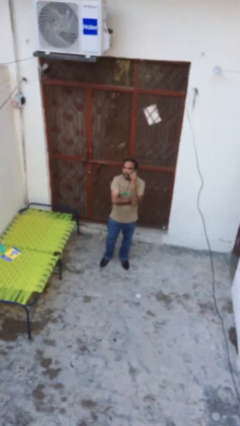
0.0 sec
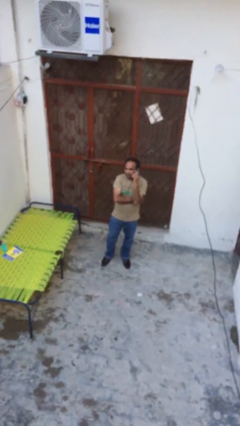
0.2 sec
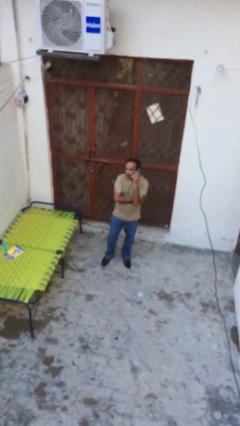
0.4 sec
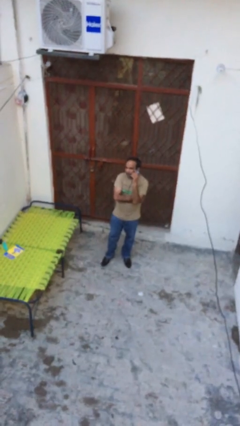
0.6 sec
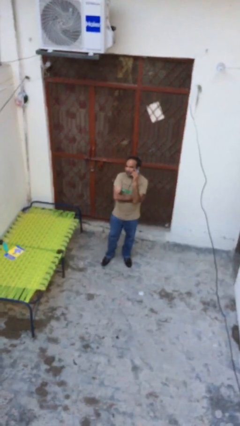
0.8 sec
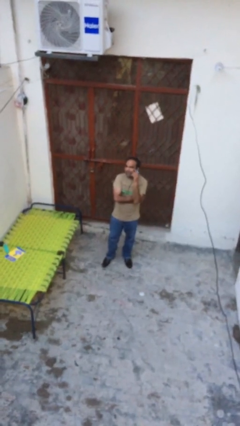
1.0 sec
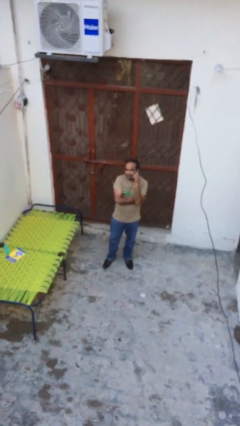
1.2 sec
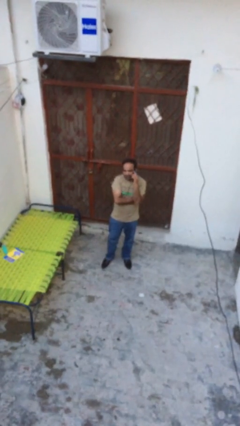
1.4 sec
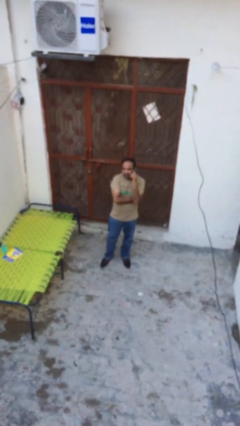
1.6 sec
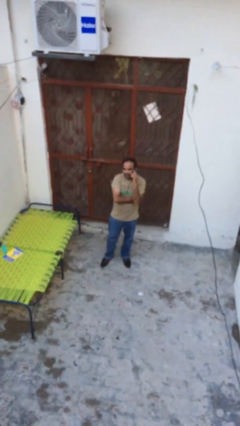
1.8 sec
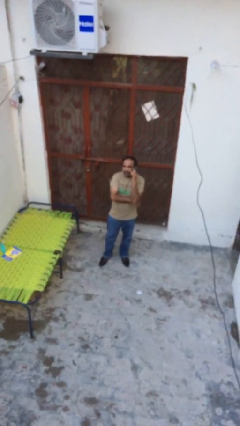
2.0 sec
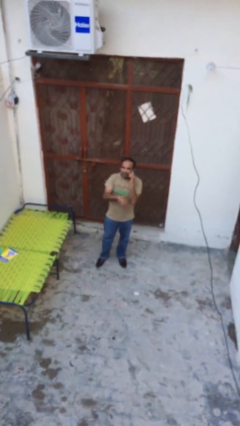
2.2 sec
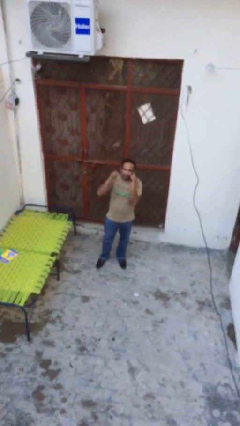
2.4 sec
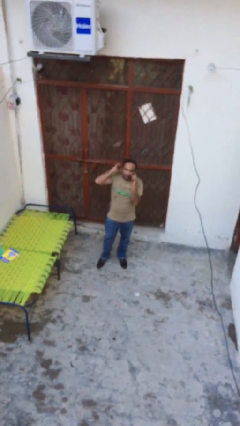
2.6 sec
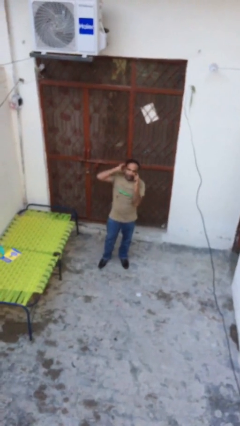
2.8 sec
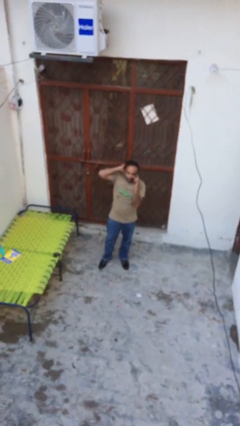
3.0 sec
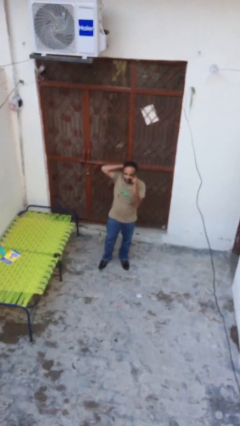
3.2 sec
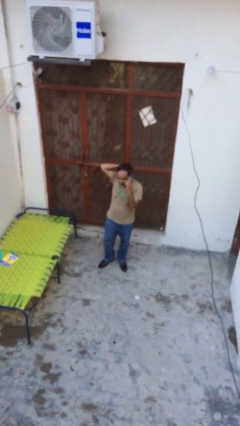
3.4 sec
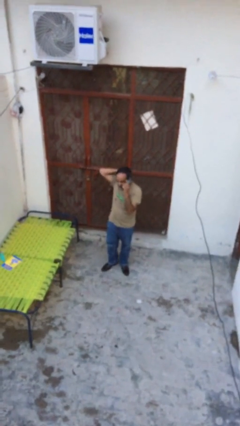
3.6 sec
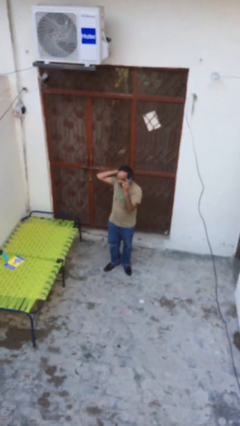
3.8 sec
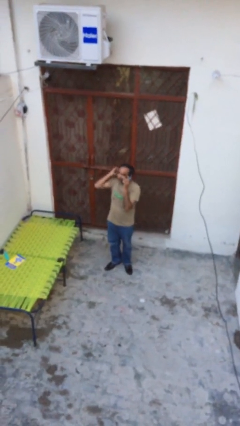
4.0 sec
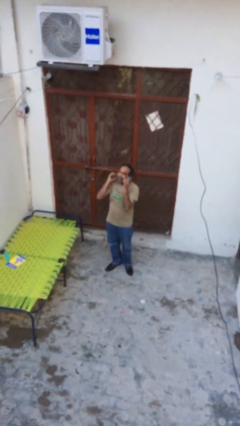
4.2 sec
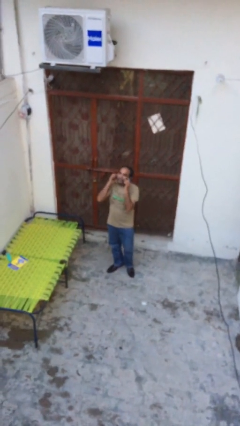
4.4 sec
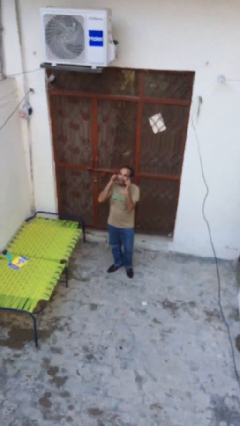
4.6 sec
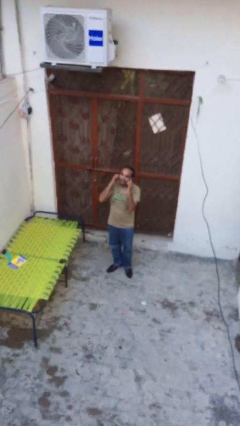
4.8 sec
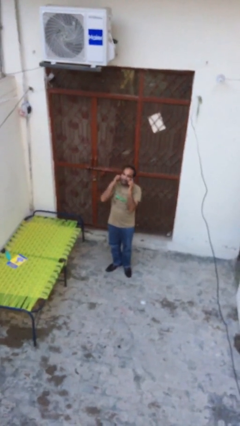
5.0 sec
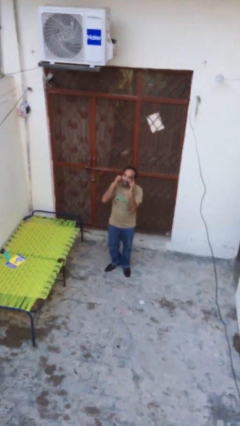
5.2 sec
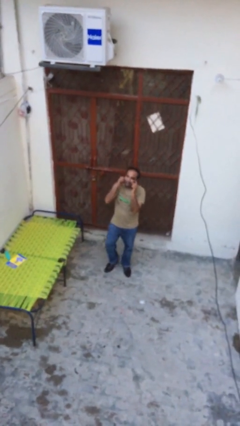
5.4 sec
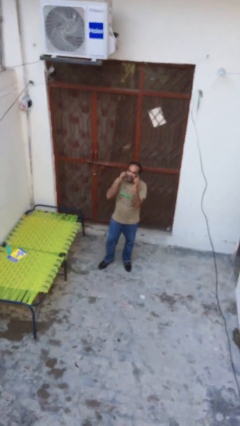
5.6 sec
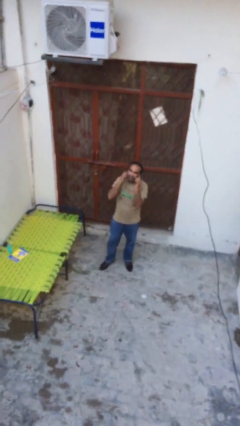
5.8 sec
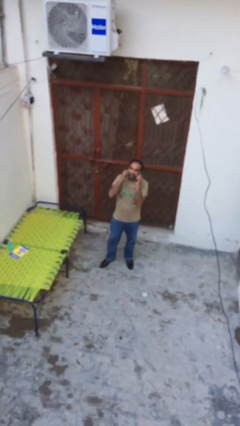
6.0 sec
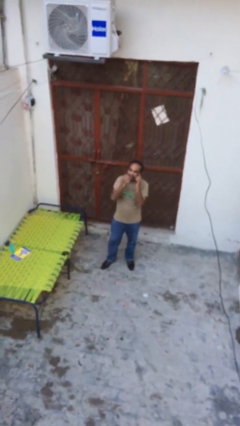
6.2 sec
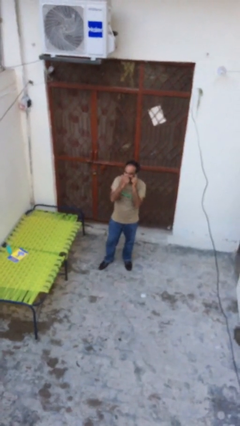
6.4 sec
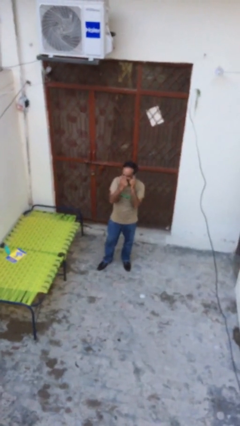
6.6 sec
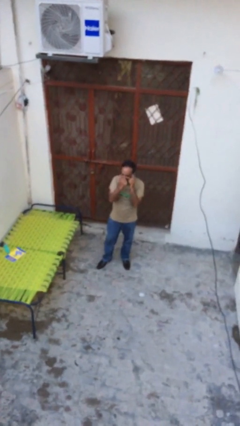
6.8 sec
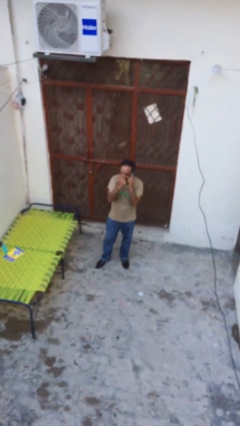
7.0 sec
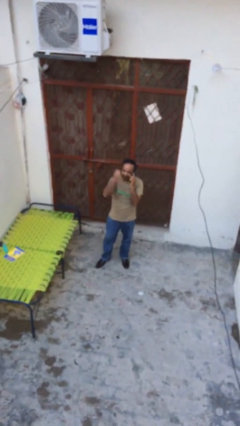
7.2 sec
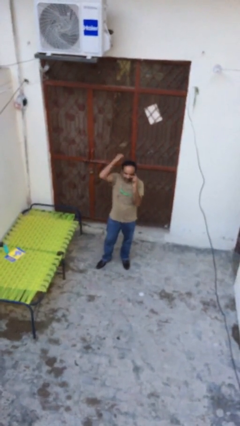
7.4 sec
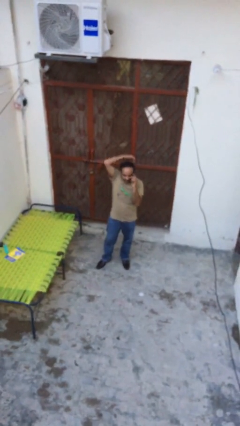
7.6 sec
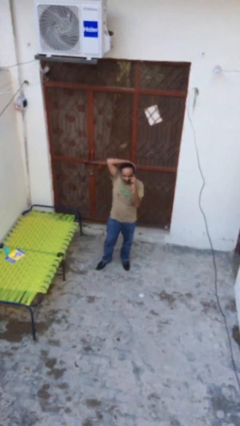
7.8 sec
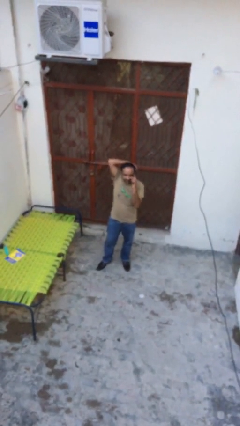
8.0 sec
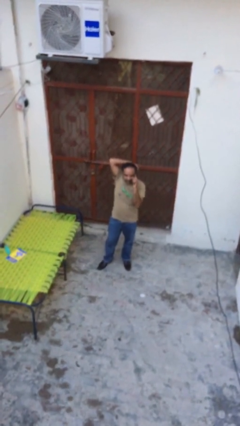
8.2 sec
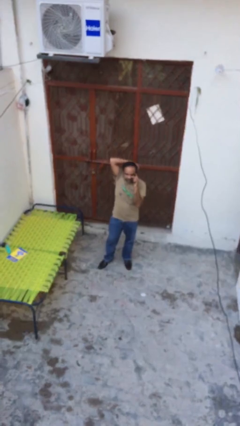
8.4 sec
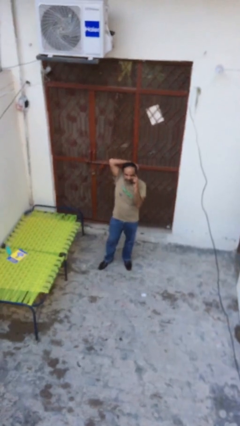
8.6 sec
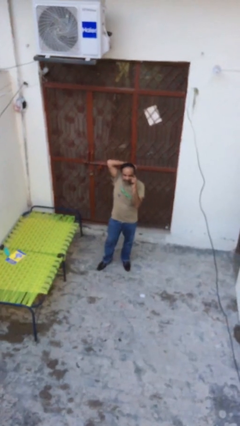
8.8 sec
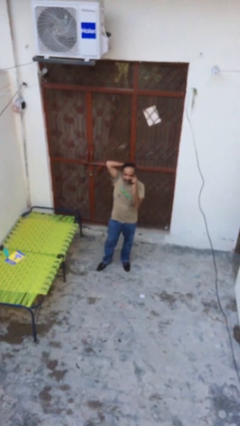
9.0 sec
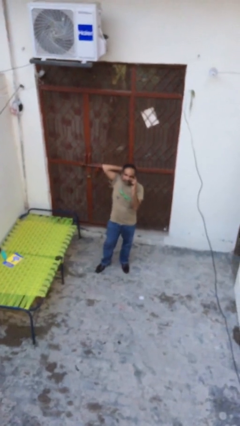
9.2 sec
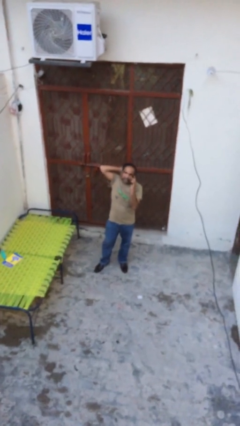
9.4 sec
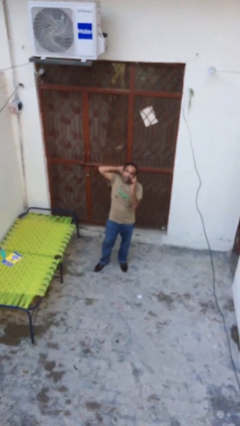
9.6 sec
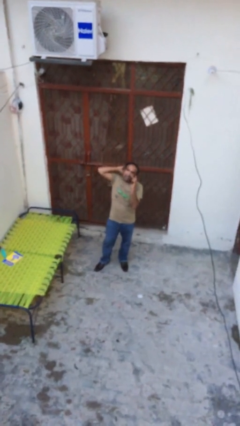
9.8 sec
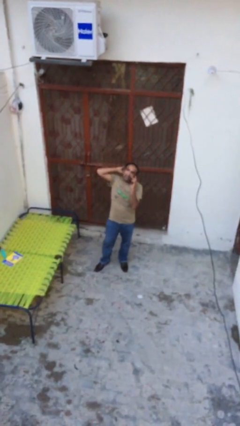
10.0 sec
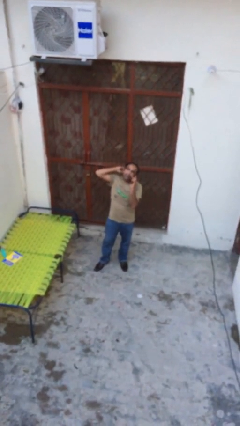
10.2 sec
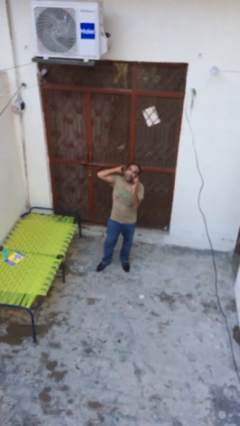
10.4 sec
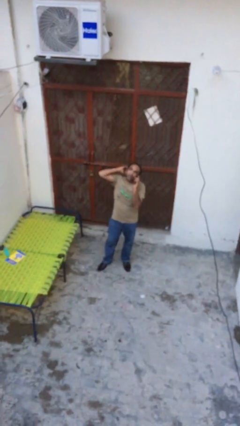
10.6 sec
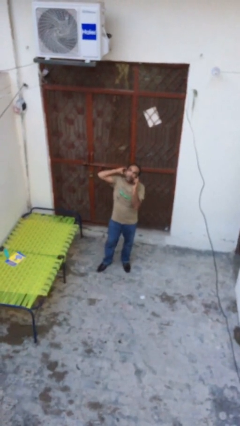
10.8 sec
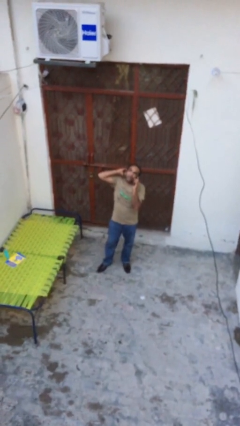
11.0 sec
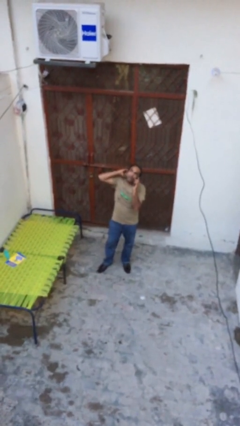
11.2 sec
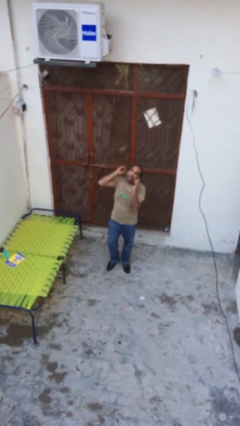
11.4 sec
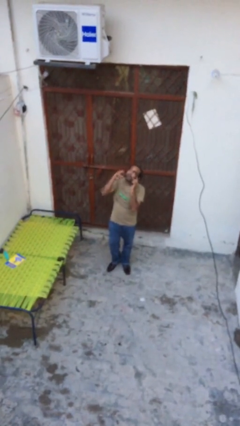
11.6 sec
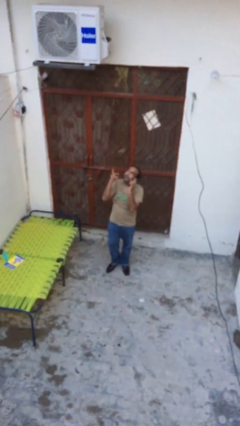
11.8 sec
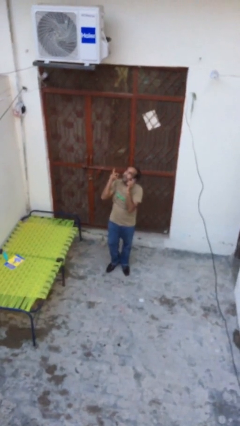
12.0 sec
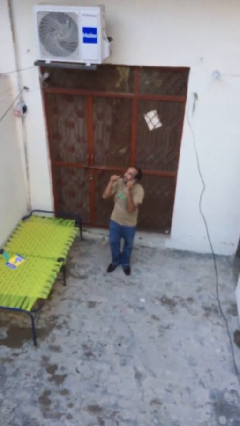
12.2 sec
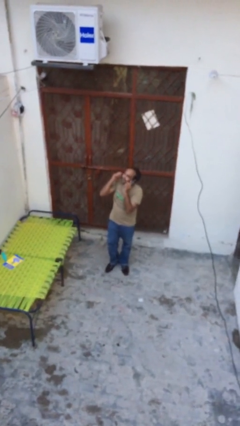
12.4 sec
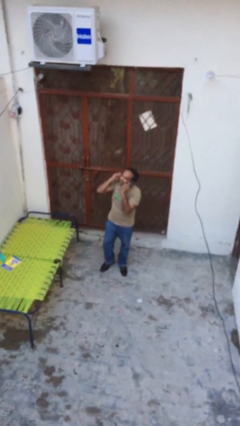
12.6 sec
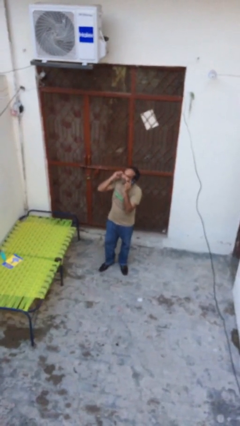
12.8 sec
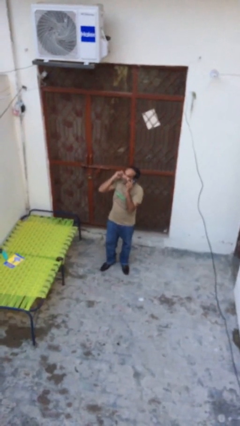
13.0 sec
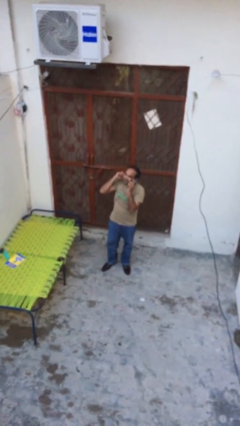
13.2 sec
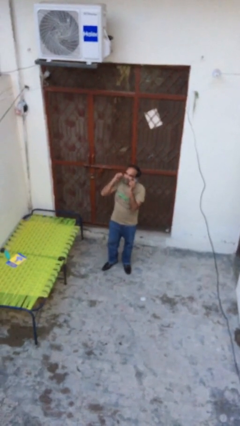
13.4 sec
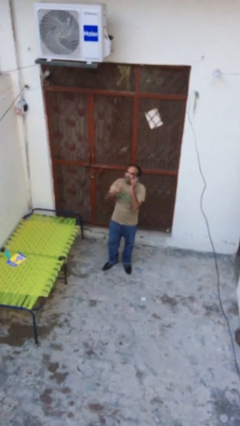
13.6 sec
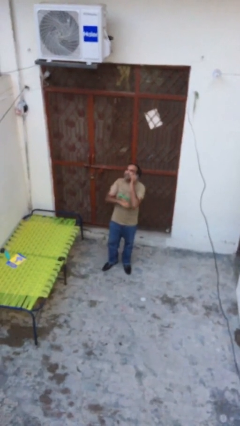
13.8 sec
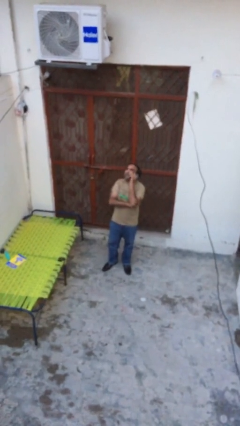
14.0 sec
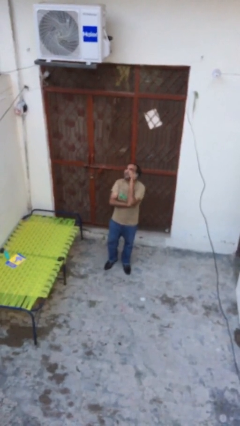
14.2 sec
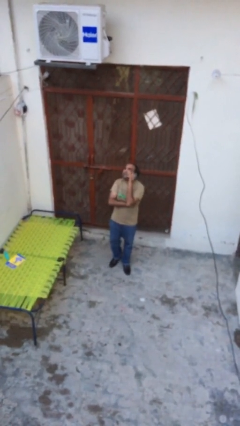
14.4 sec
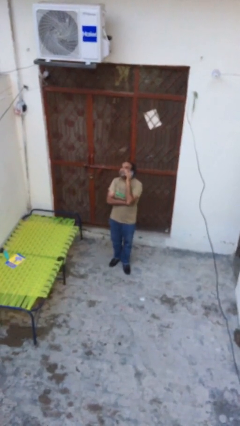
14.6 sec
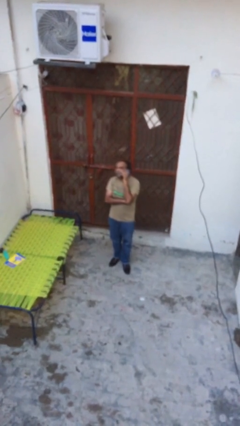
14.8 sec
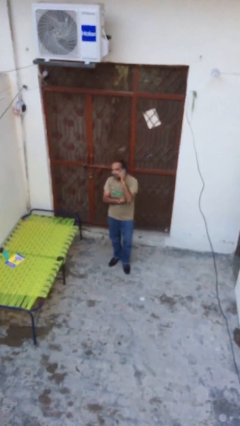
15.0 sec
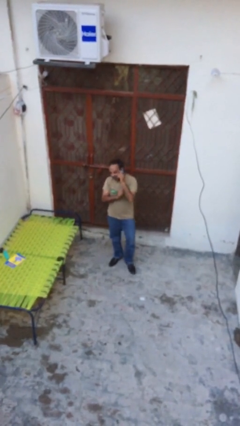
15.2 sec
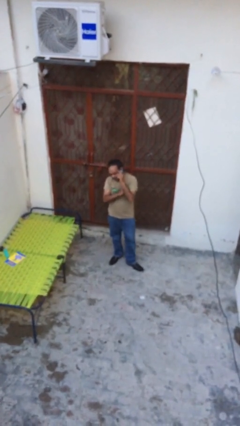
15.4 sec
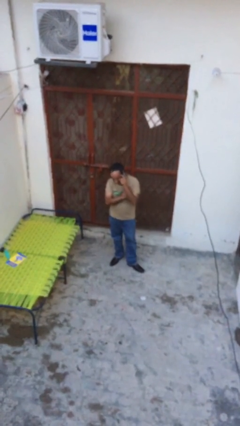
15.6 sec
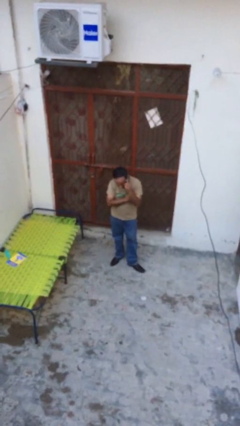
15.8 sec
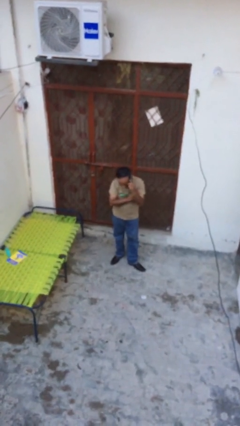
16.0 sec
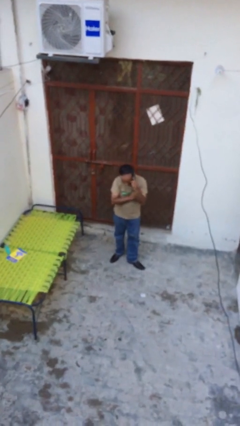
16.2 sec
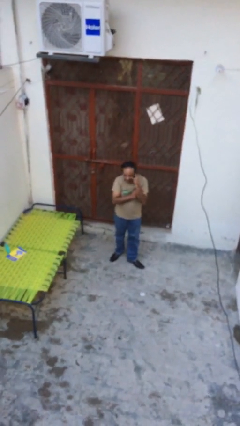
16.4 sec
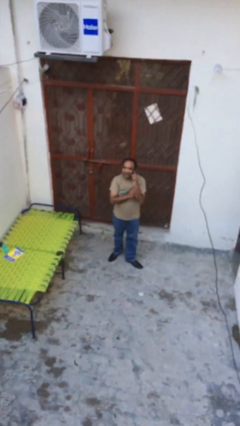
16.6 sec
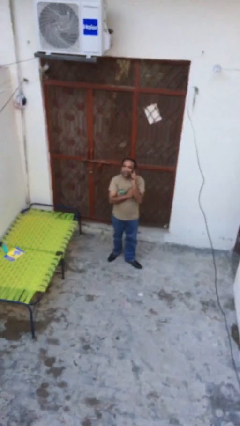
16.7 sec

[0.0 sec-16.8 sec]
person talks on phone

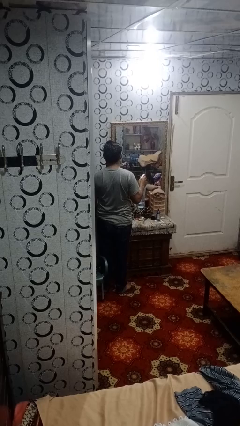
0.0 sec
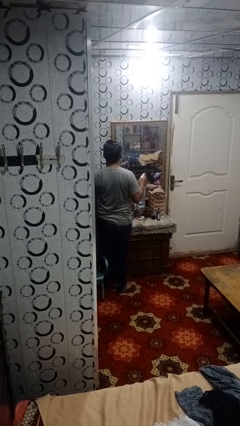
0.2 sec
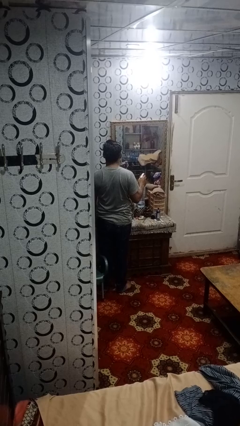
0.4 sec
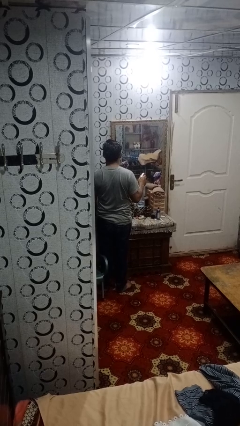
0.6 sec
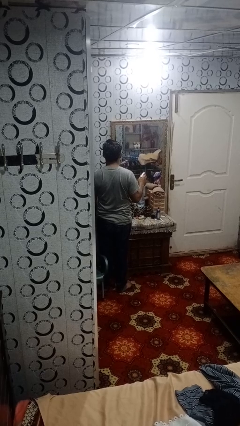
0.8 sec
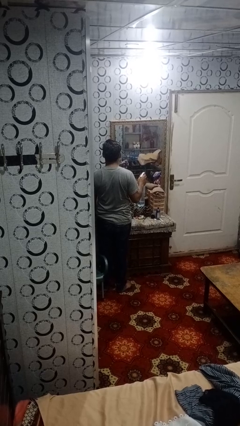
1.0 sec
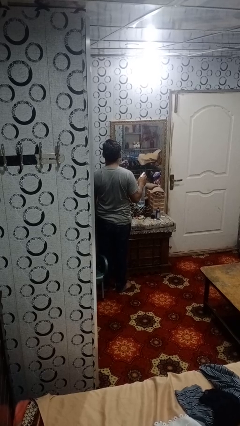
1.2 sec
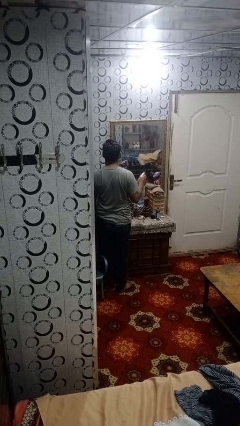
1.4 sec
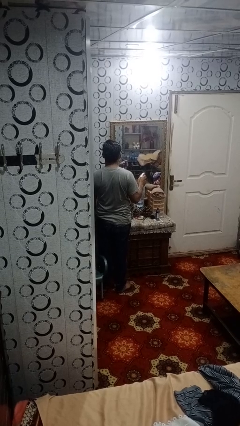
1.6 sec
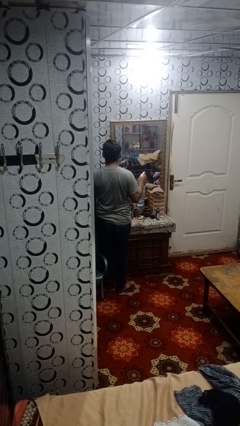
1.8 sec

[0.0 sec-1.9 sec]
person sprays from bottle
